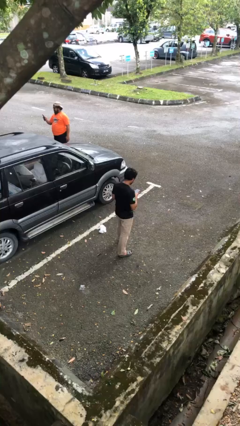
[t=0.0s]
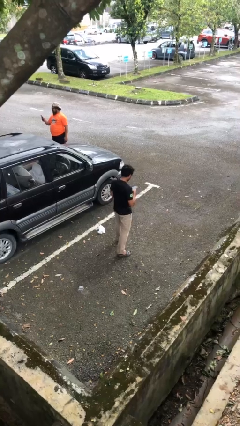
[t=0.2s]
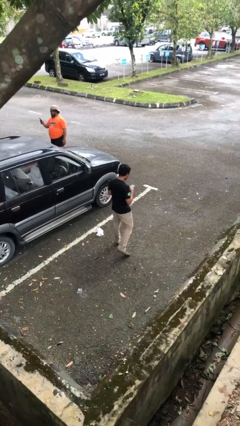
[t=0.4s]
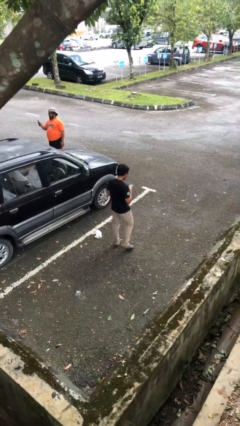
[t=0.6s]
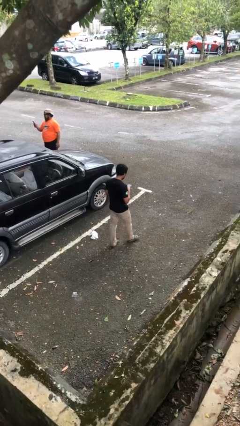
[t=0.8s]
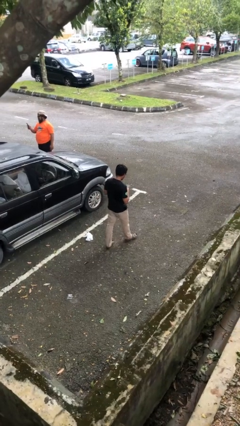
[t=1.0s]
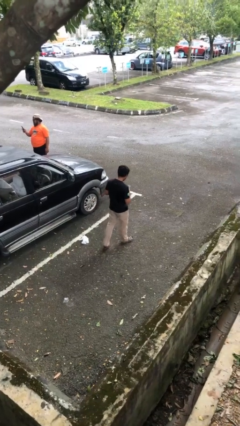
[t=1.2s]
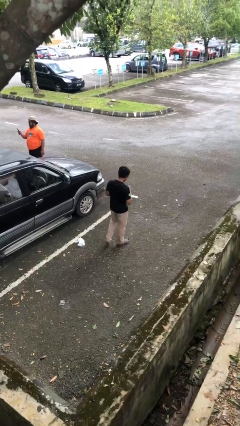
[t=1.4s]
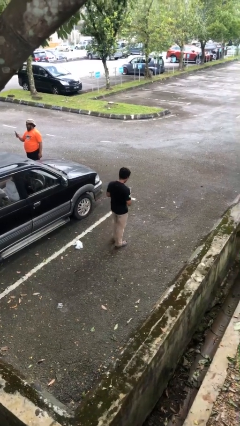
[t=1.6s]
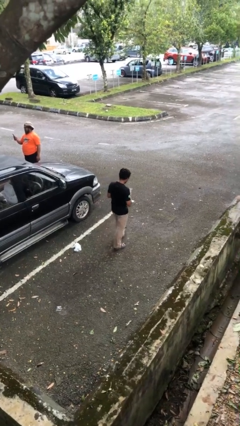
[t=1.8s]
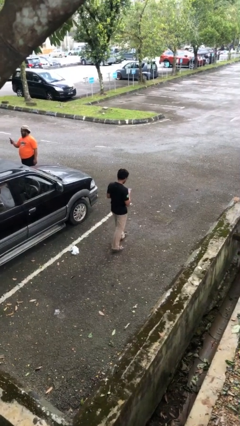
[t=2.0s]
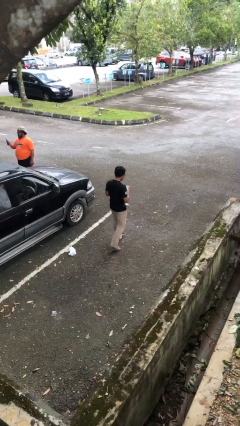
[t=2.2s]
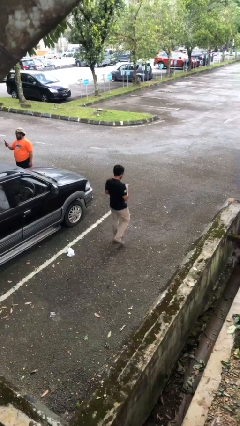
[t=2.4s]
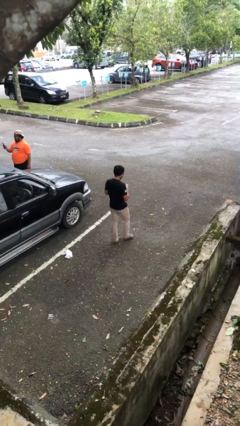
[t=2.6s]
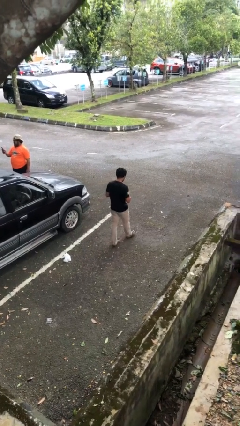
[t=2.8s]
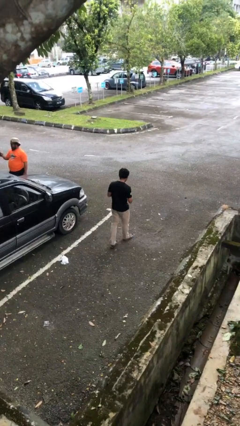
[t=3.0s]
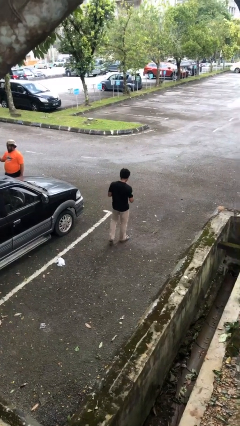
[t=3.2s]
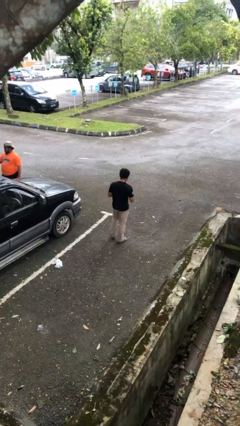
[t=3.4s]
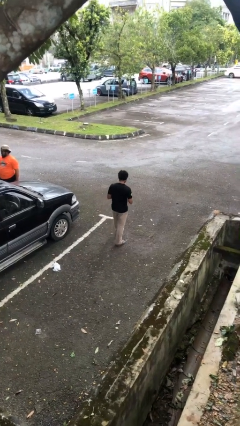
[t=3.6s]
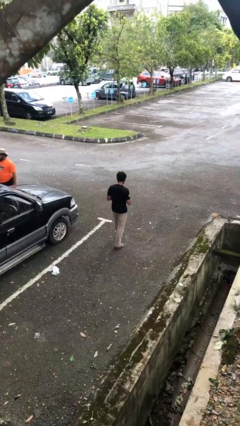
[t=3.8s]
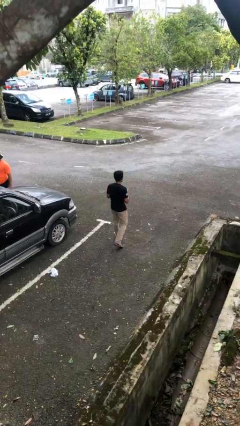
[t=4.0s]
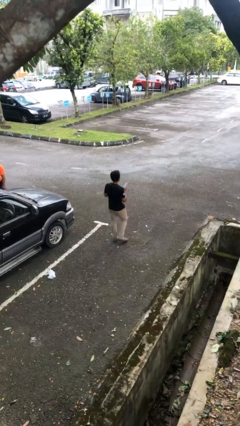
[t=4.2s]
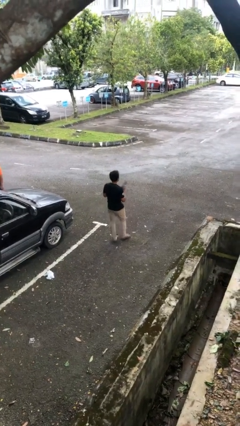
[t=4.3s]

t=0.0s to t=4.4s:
person texts on phone

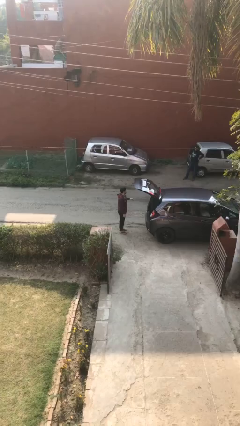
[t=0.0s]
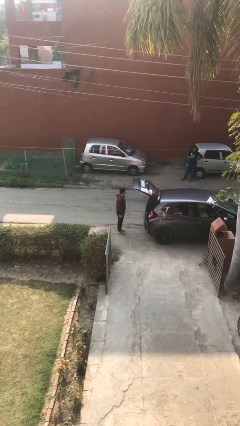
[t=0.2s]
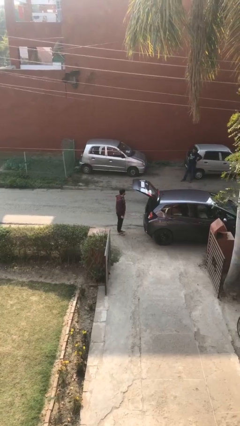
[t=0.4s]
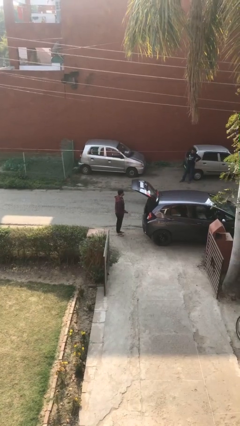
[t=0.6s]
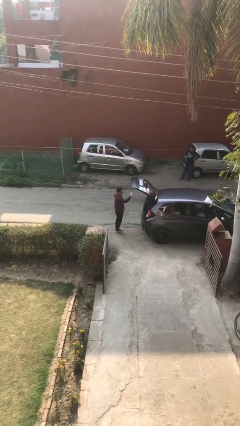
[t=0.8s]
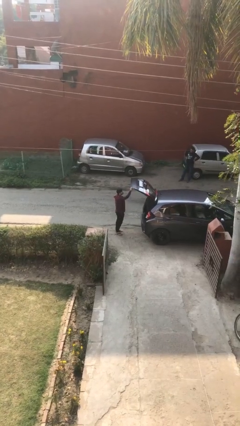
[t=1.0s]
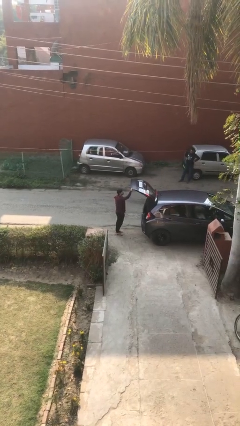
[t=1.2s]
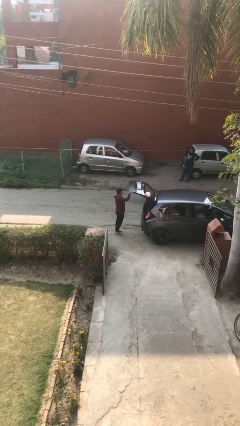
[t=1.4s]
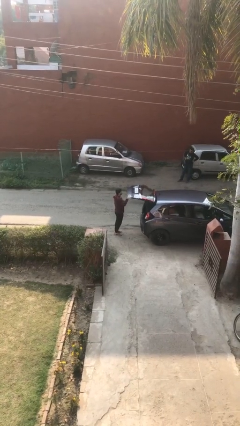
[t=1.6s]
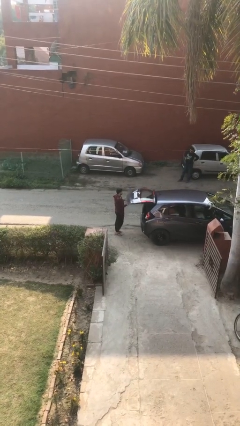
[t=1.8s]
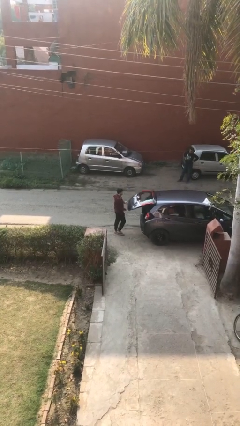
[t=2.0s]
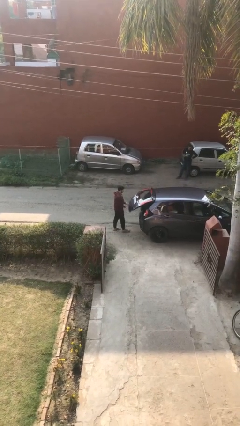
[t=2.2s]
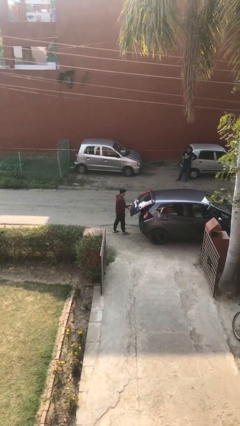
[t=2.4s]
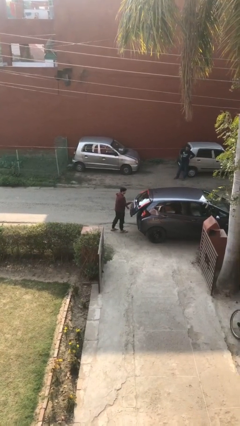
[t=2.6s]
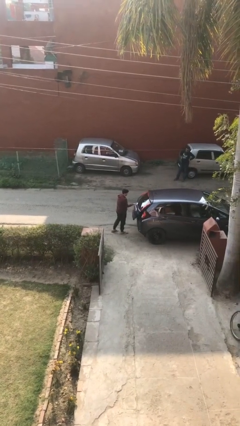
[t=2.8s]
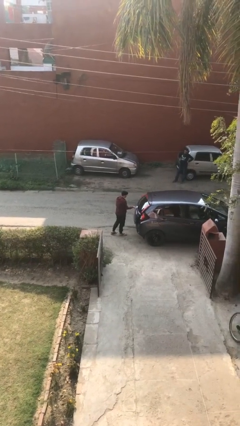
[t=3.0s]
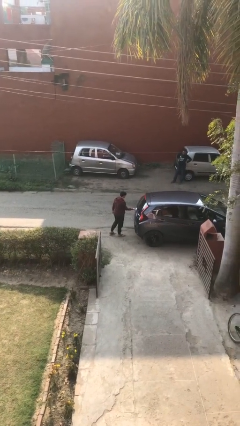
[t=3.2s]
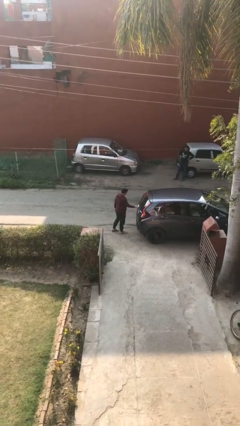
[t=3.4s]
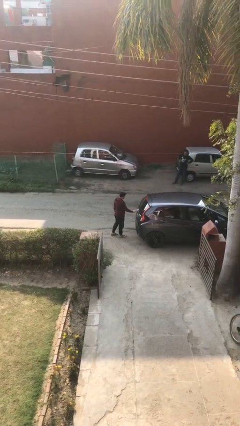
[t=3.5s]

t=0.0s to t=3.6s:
person closes car trunk

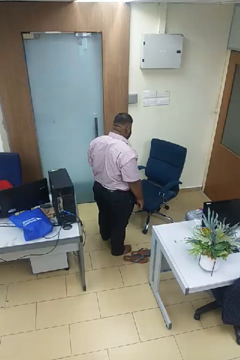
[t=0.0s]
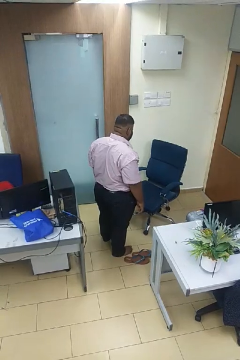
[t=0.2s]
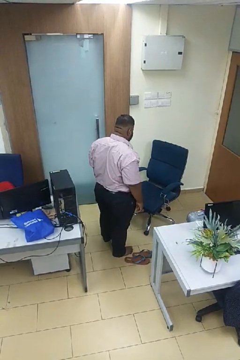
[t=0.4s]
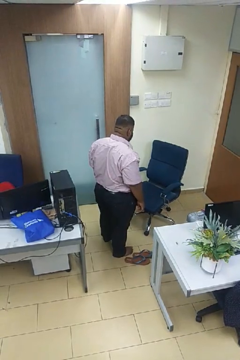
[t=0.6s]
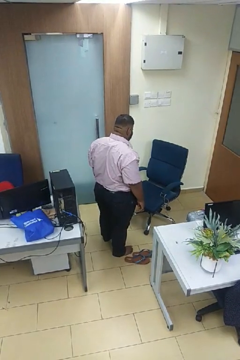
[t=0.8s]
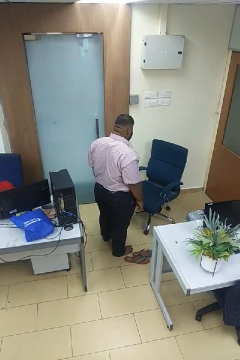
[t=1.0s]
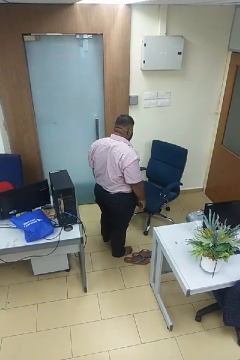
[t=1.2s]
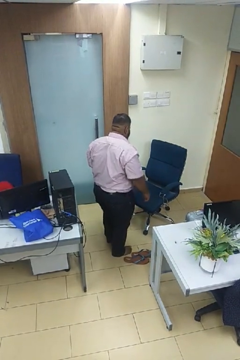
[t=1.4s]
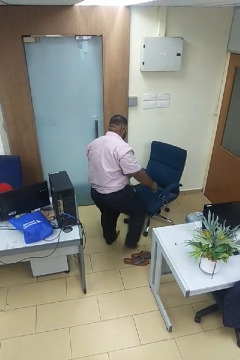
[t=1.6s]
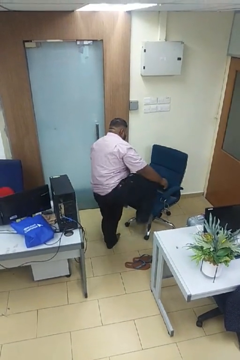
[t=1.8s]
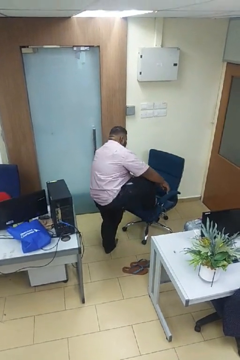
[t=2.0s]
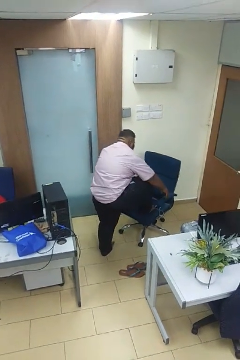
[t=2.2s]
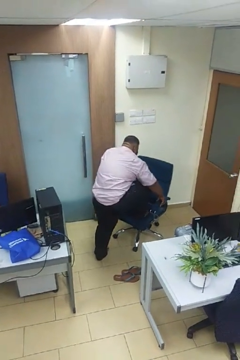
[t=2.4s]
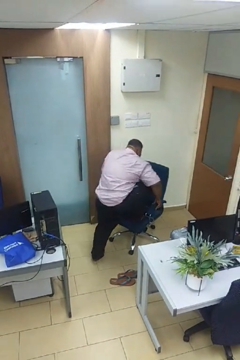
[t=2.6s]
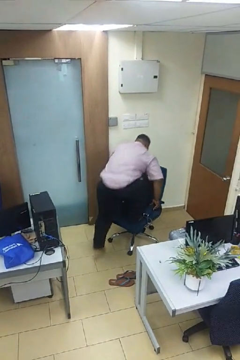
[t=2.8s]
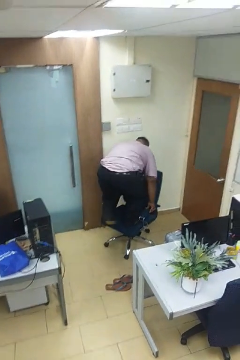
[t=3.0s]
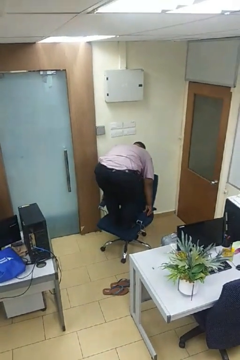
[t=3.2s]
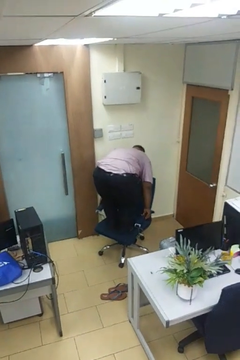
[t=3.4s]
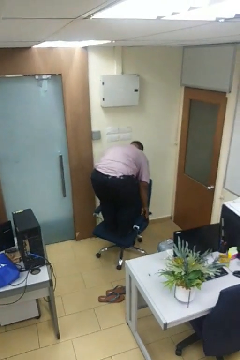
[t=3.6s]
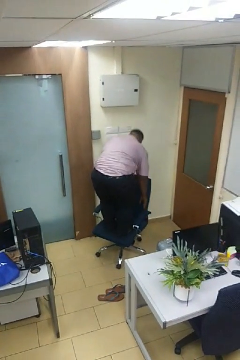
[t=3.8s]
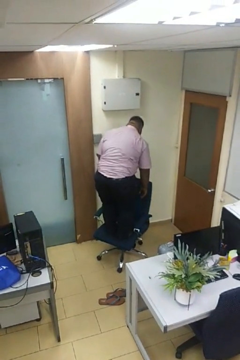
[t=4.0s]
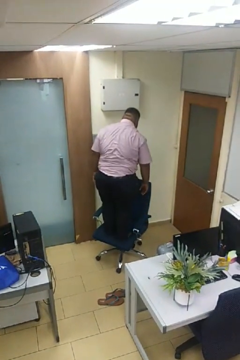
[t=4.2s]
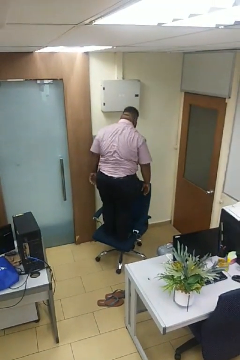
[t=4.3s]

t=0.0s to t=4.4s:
person climbs on chair

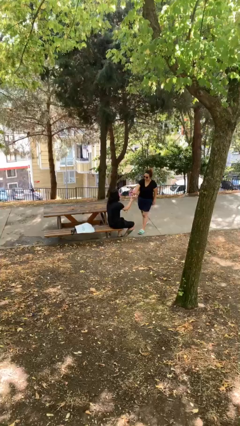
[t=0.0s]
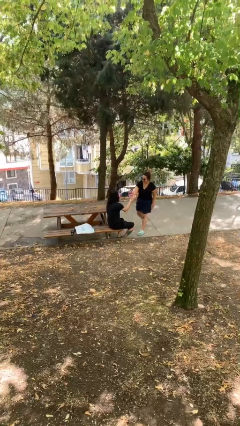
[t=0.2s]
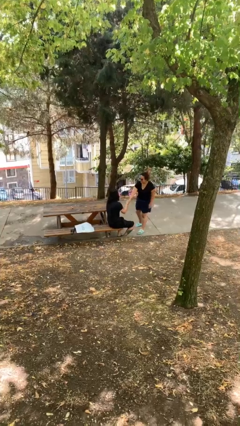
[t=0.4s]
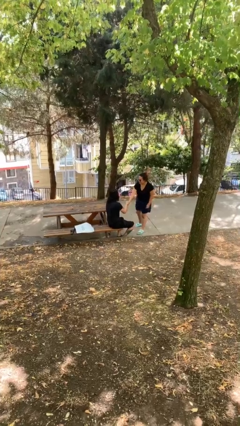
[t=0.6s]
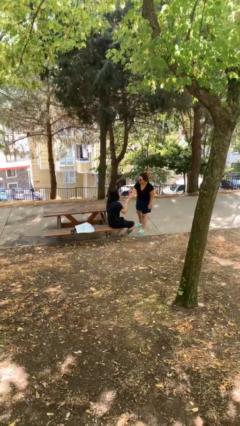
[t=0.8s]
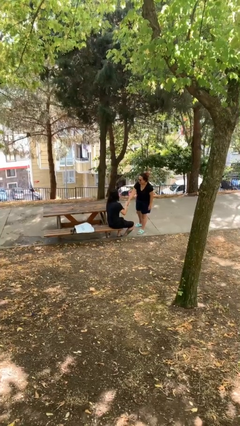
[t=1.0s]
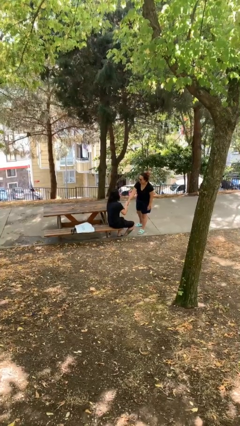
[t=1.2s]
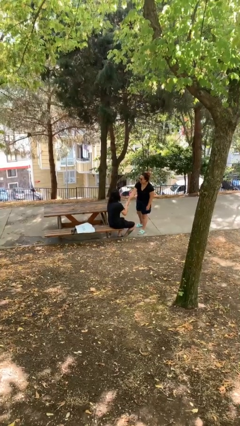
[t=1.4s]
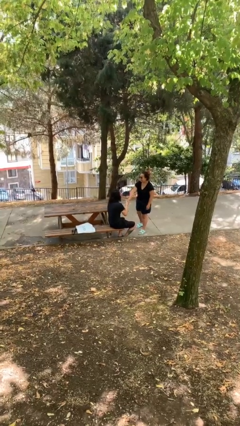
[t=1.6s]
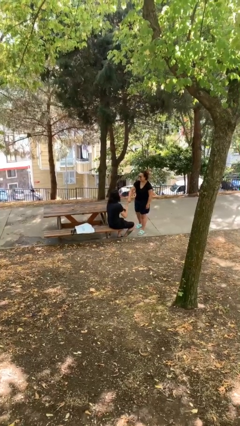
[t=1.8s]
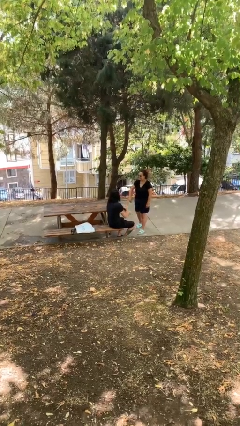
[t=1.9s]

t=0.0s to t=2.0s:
person shakes hand

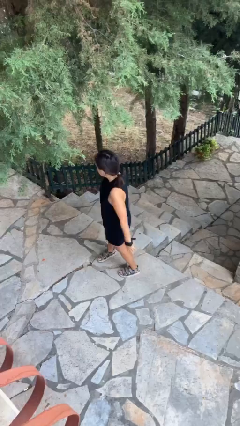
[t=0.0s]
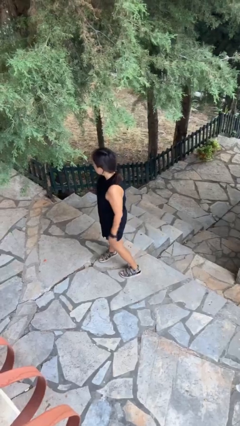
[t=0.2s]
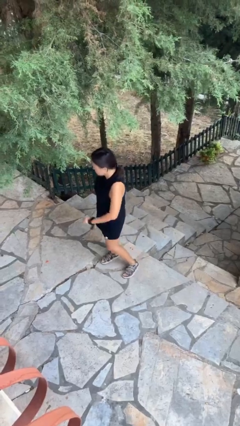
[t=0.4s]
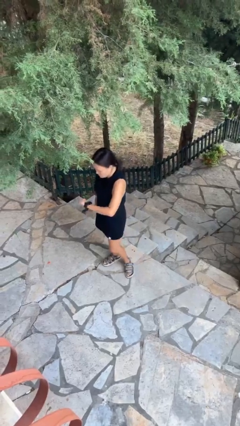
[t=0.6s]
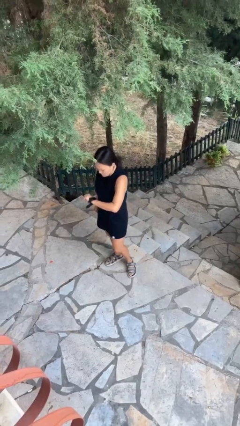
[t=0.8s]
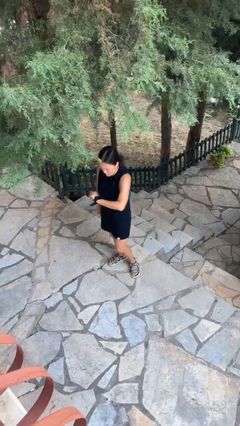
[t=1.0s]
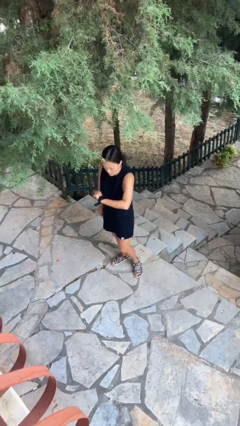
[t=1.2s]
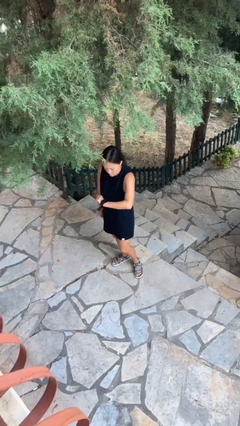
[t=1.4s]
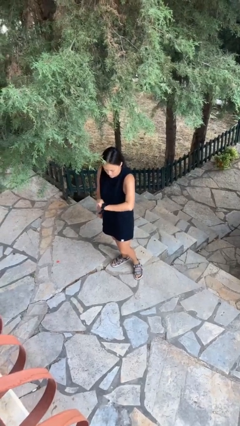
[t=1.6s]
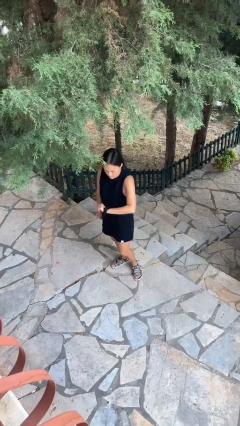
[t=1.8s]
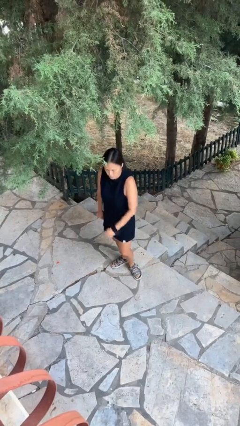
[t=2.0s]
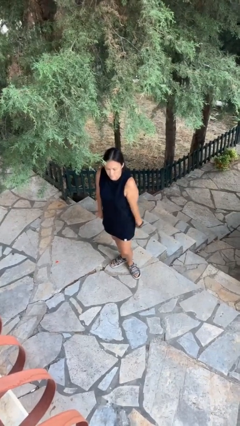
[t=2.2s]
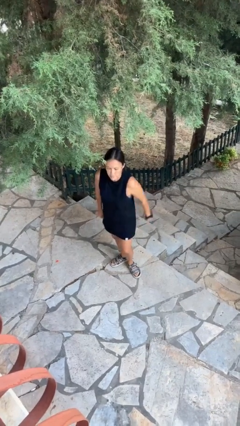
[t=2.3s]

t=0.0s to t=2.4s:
person looks at wristwatch

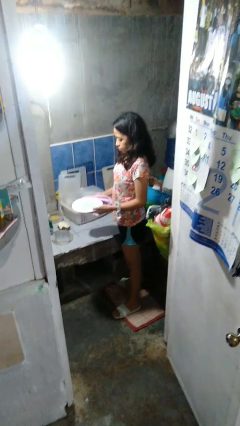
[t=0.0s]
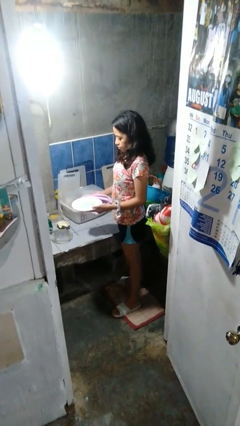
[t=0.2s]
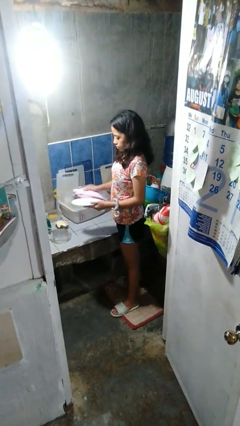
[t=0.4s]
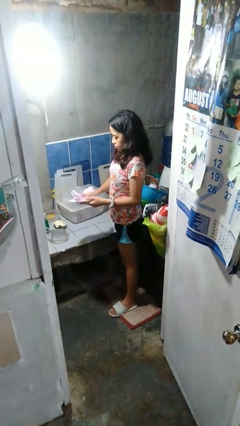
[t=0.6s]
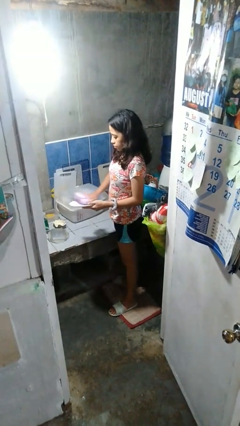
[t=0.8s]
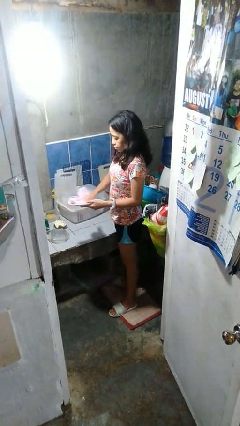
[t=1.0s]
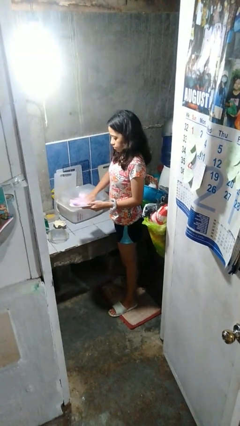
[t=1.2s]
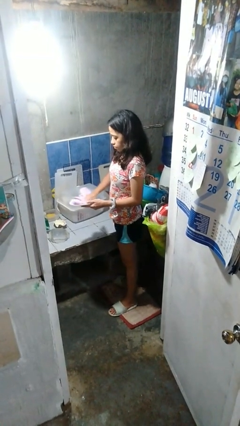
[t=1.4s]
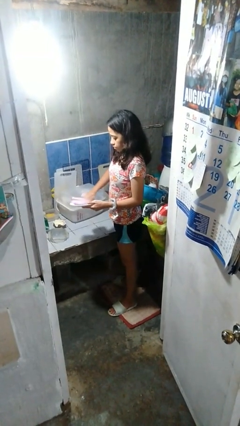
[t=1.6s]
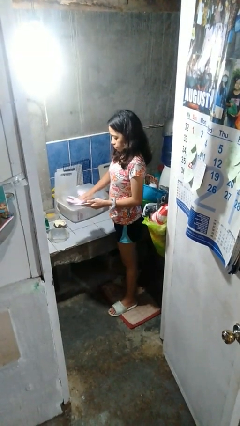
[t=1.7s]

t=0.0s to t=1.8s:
person dries dish
